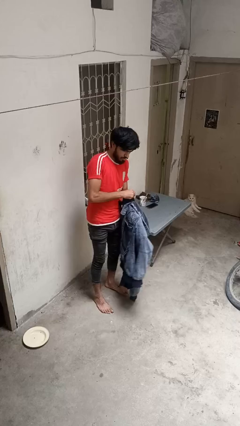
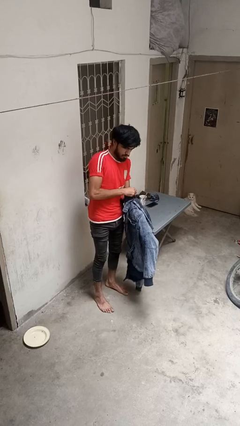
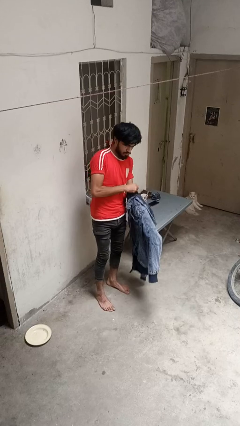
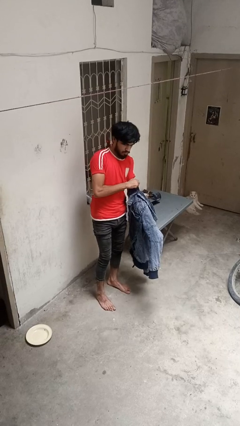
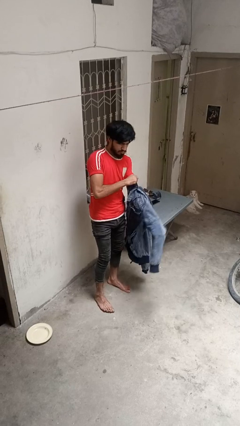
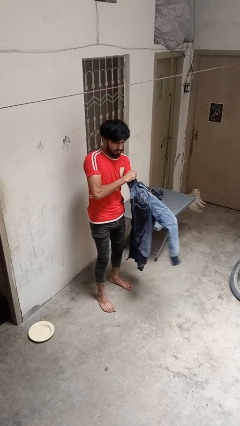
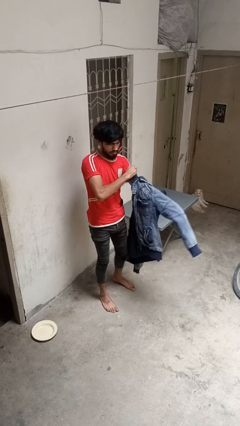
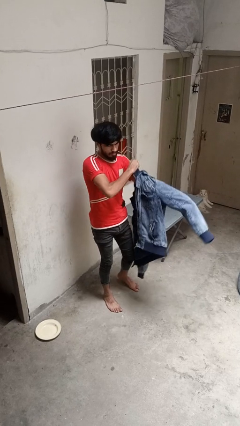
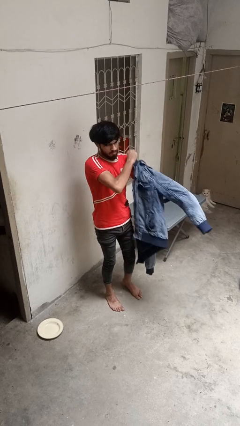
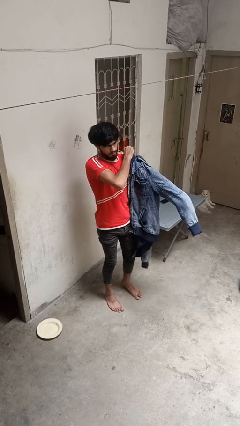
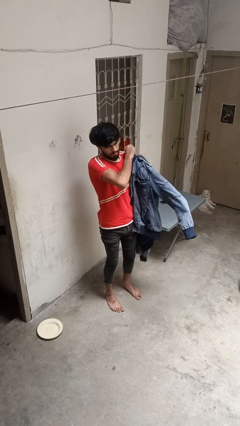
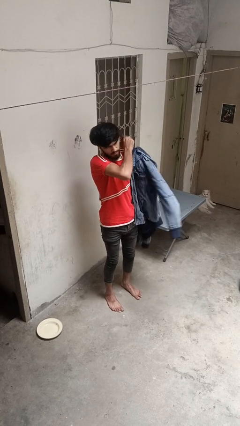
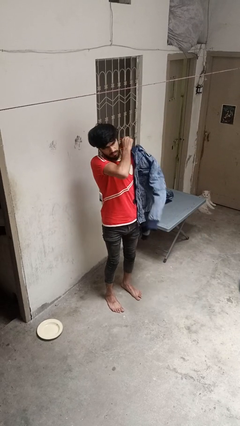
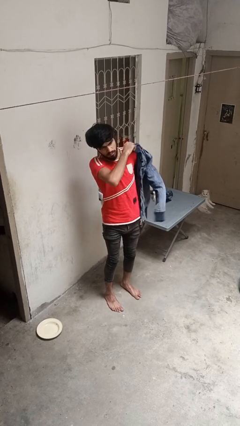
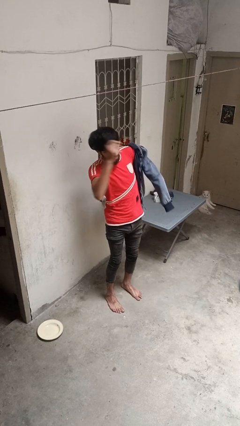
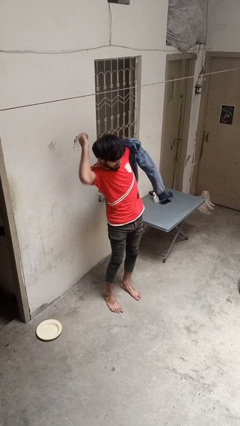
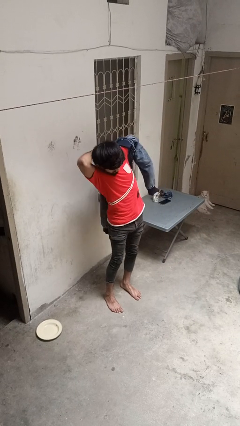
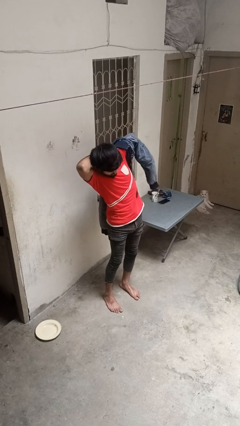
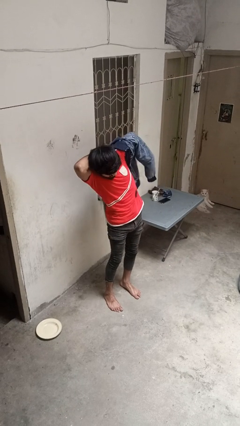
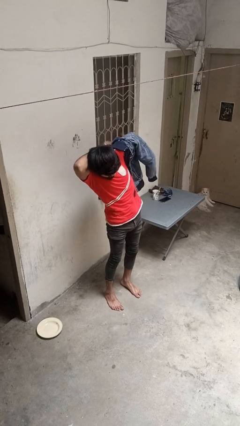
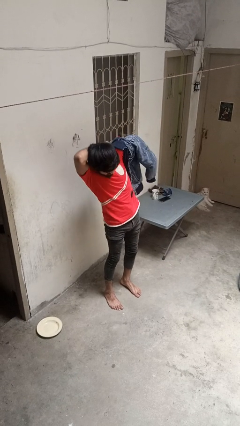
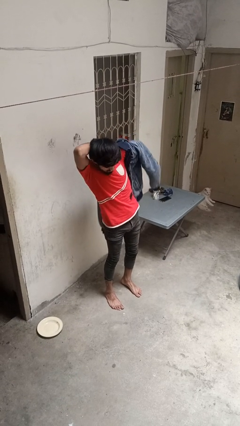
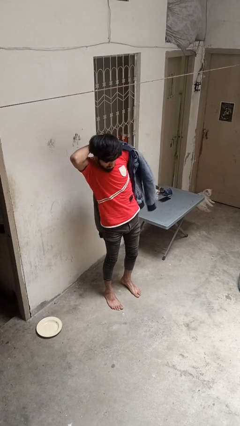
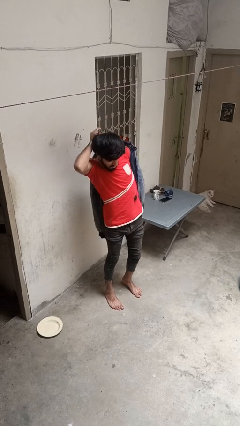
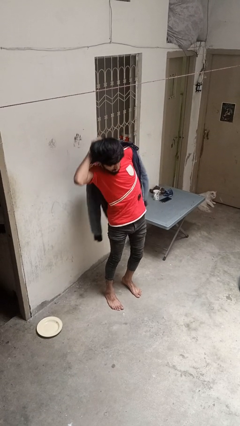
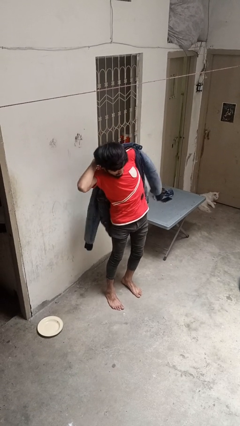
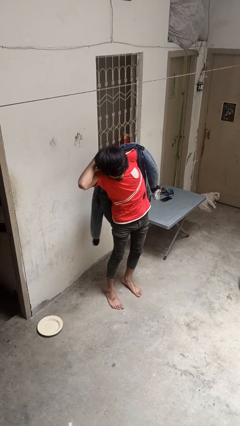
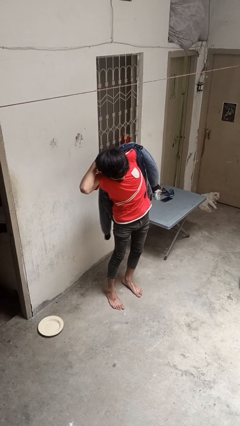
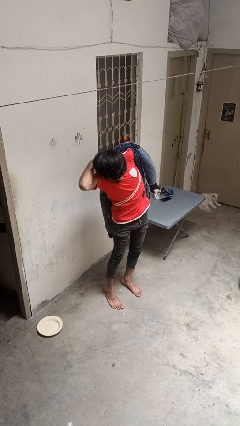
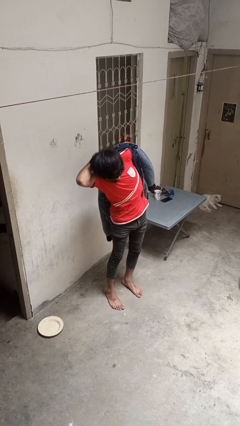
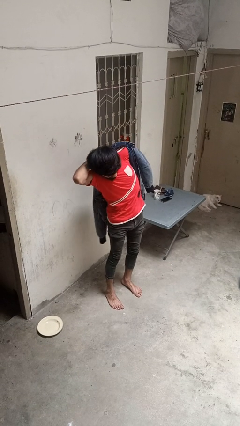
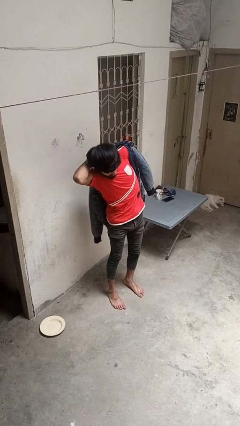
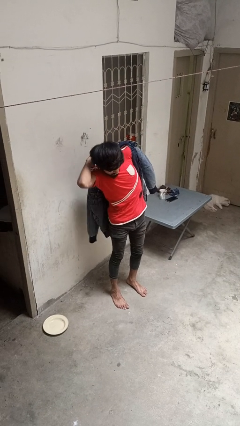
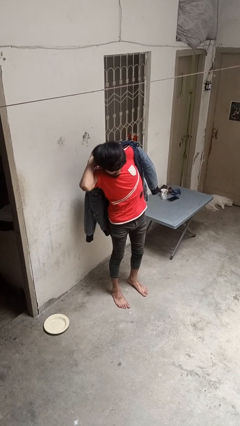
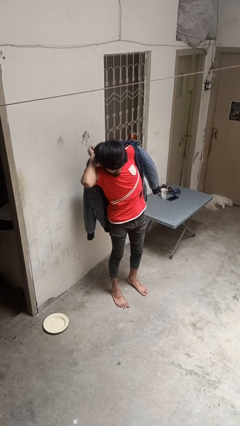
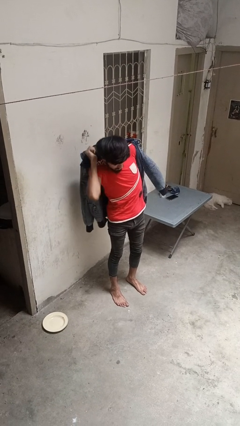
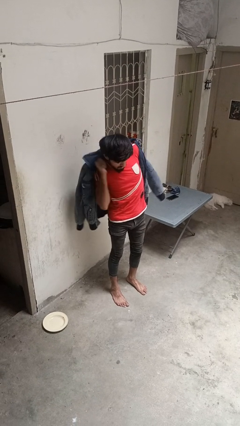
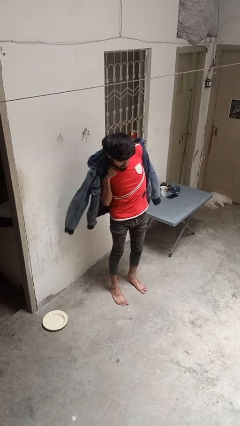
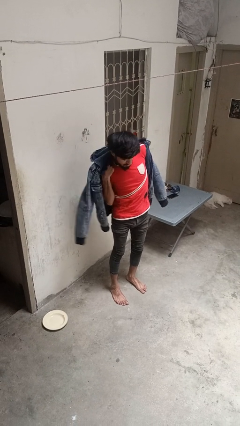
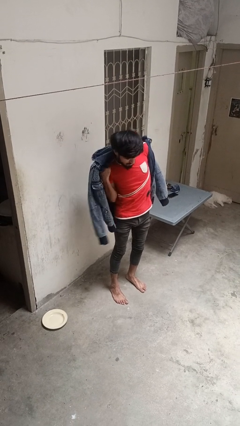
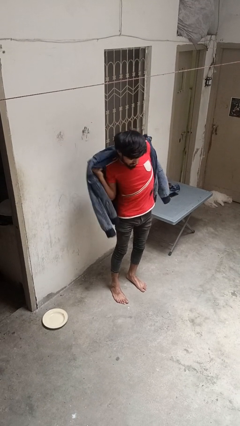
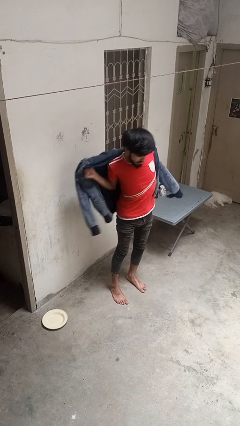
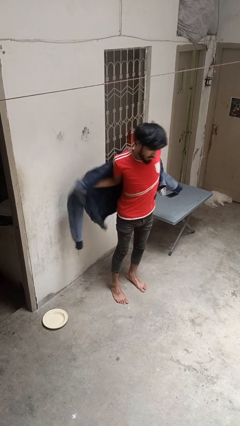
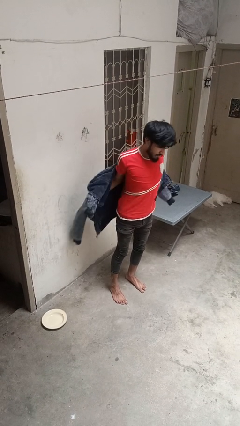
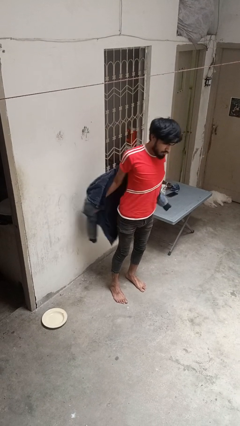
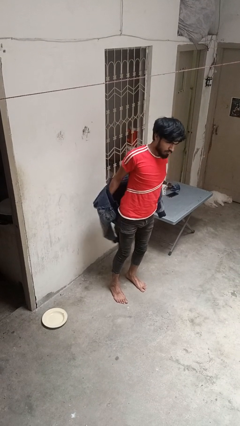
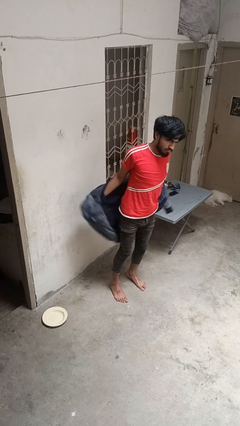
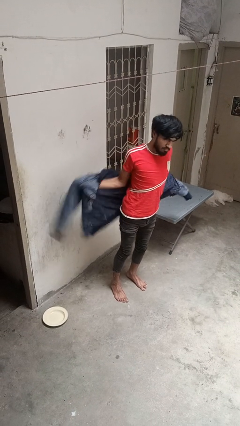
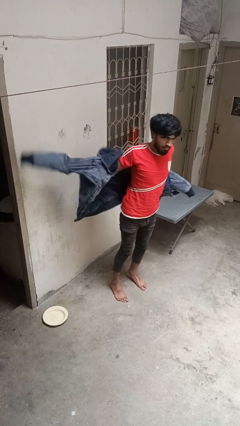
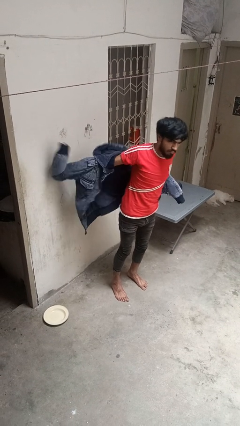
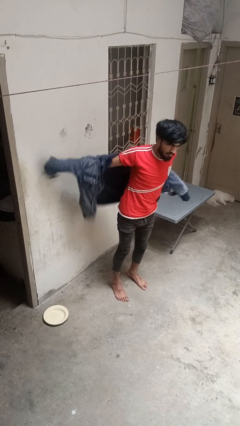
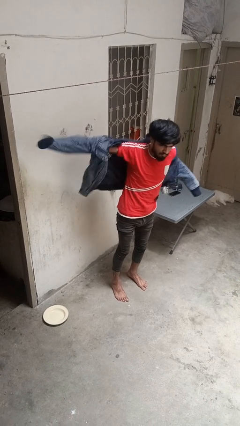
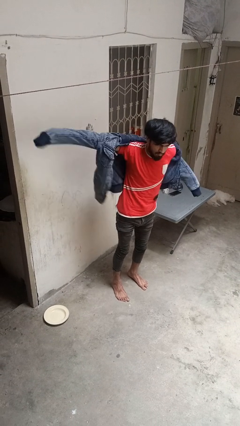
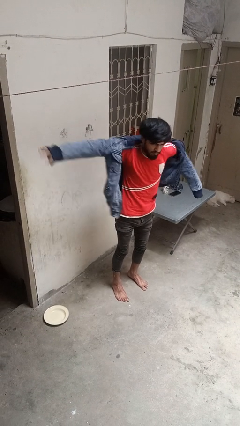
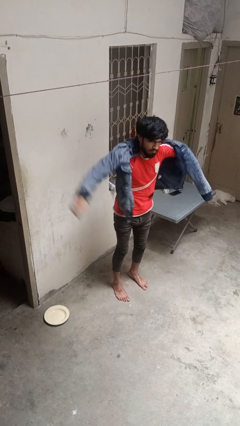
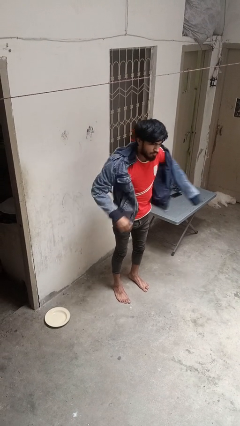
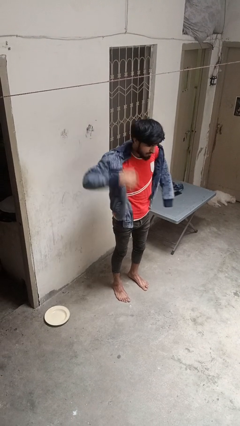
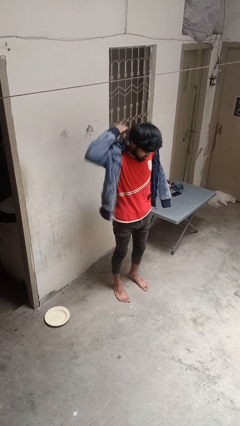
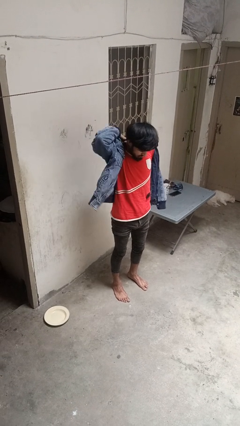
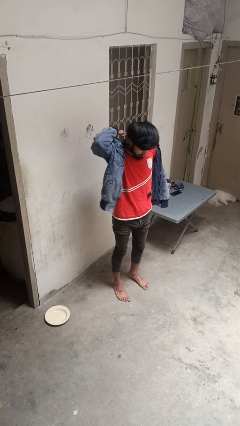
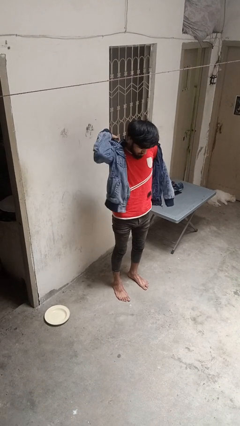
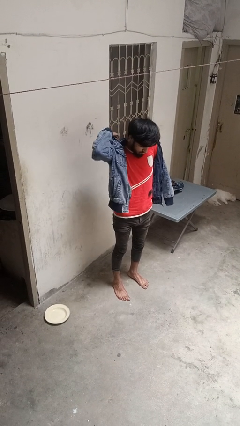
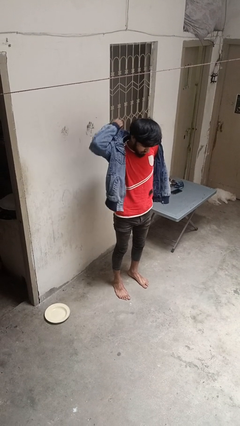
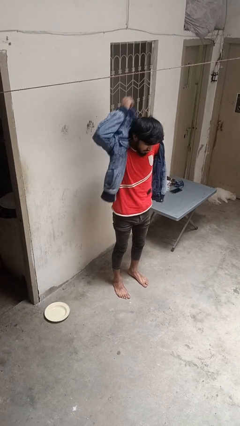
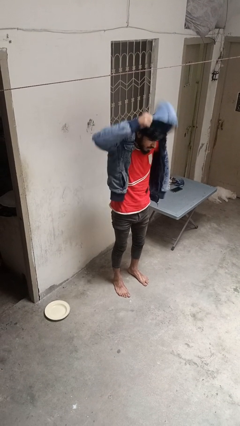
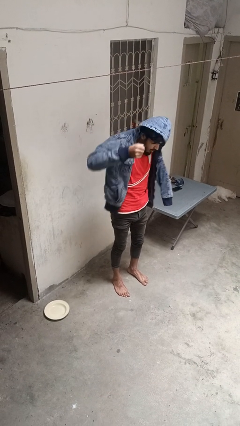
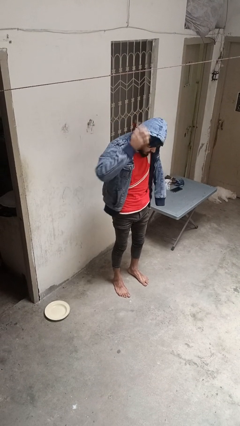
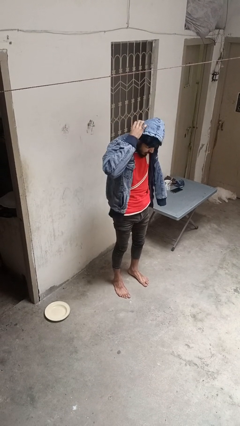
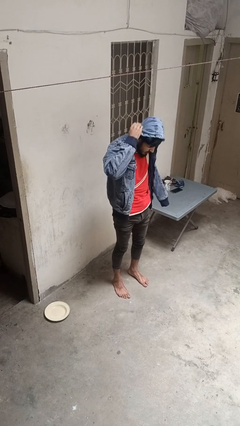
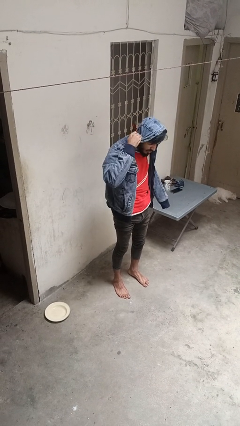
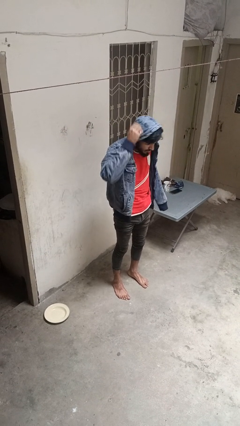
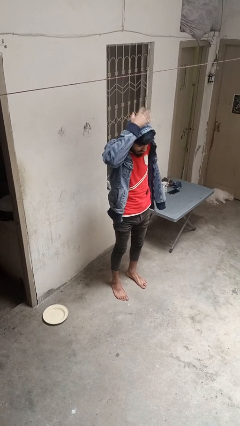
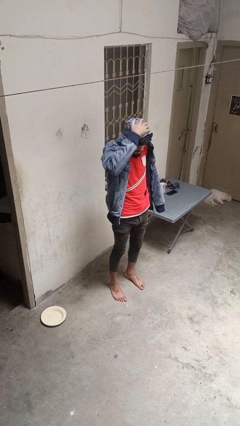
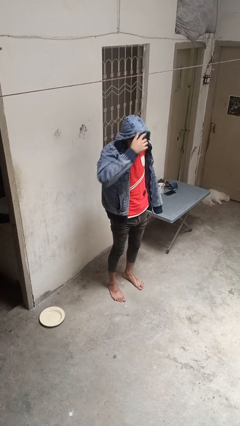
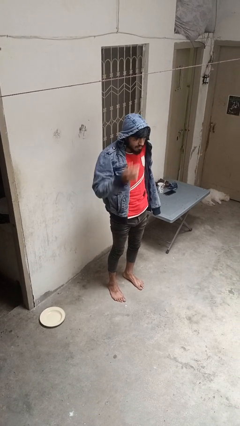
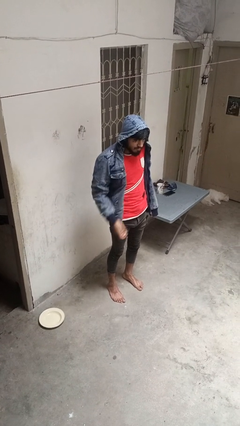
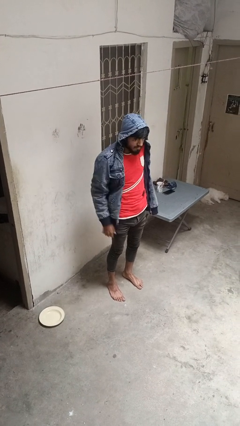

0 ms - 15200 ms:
person puts on hoodie

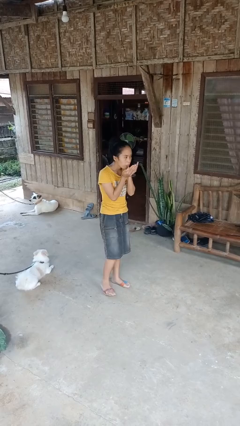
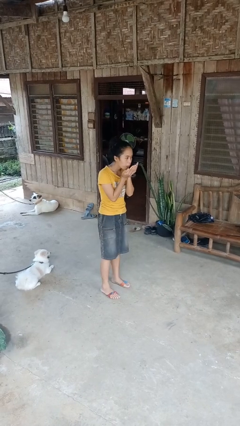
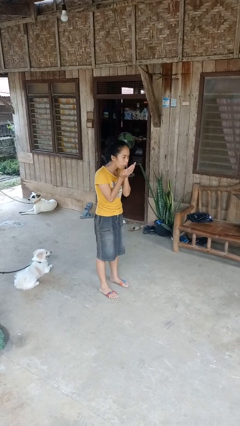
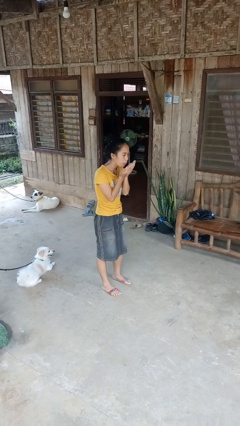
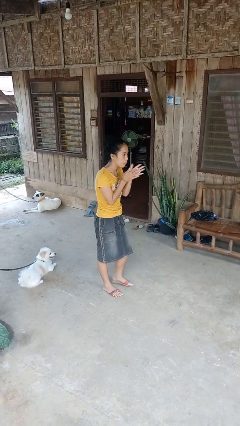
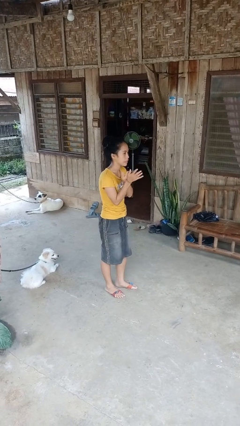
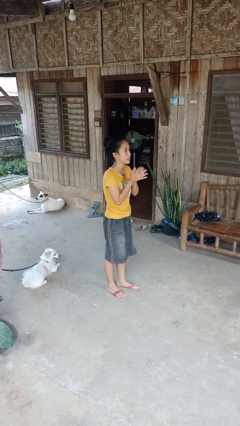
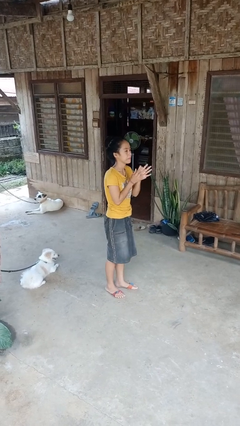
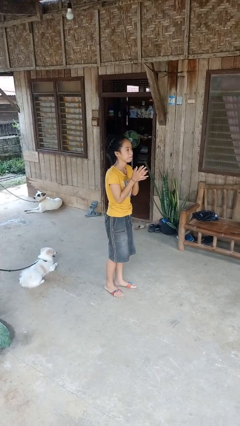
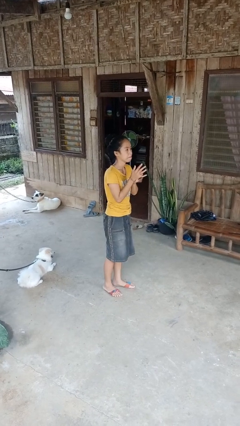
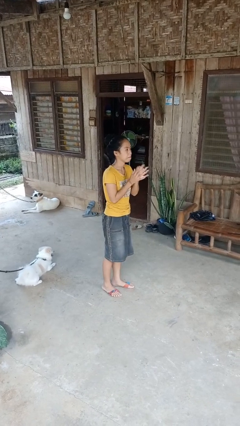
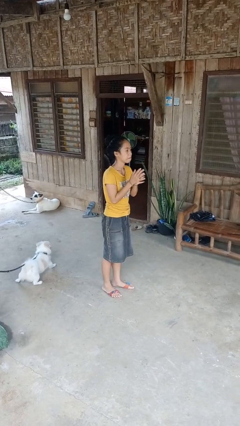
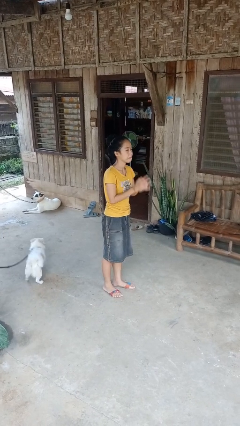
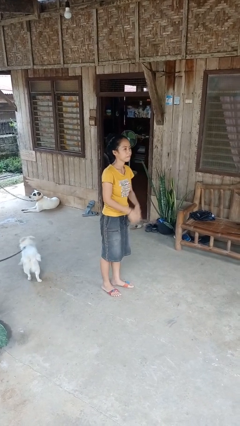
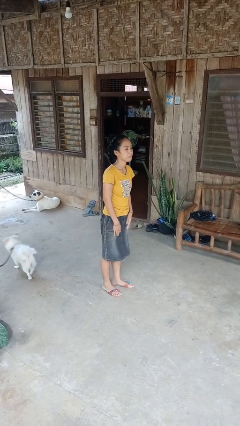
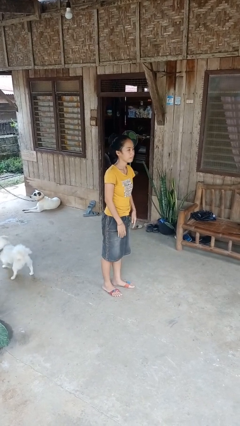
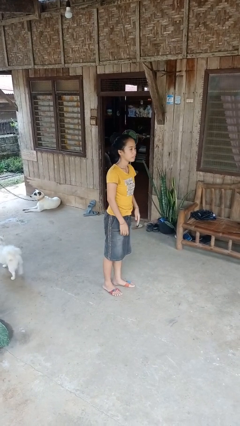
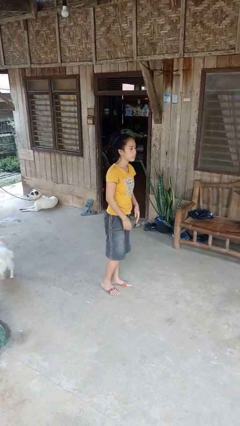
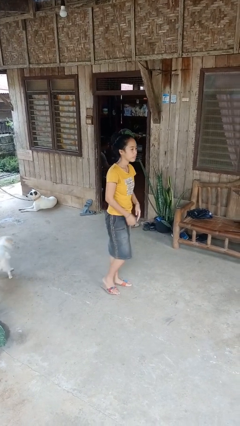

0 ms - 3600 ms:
person blows into hands
